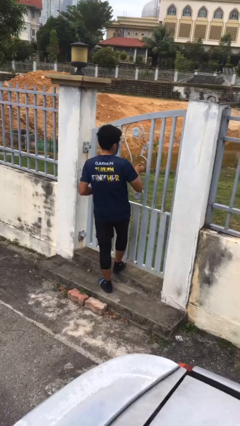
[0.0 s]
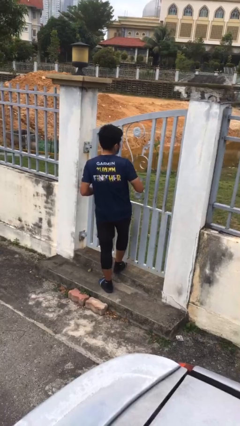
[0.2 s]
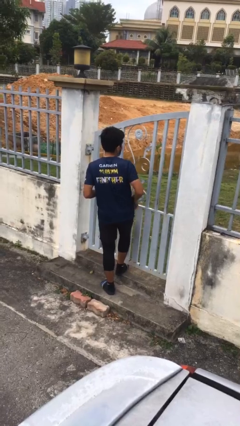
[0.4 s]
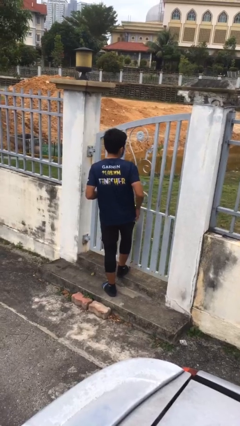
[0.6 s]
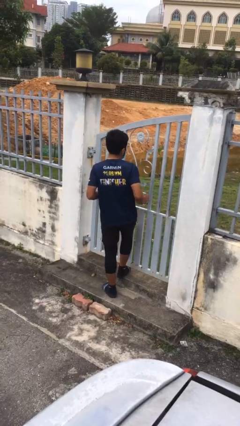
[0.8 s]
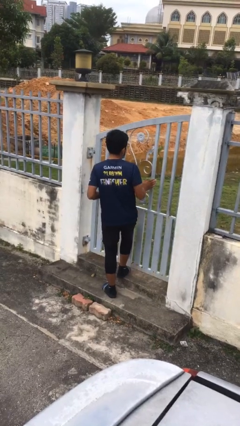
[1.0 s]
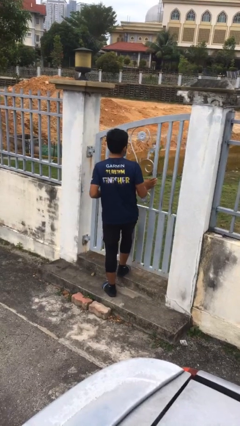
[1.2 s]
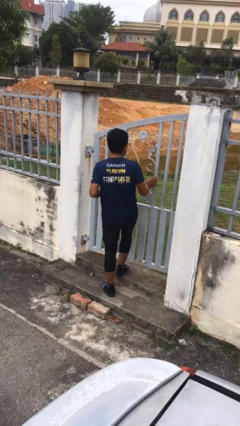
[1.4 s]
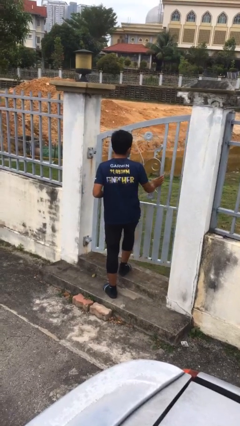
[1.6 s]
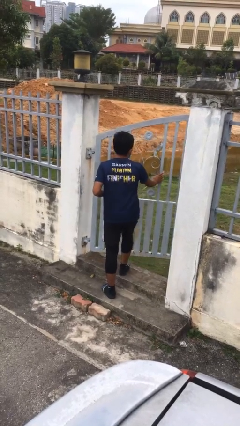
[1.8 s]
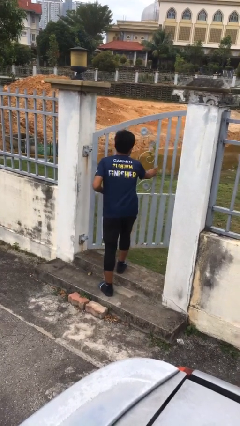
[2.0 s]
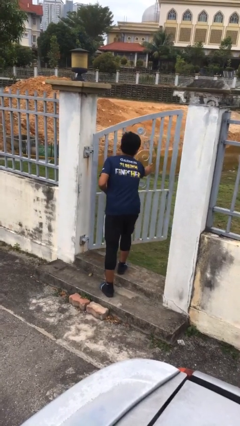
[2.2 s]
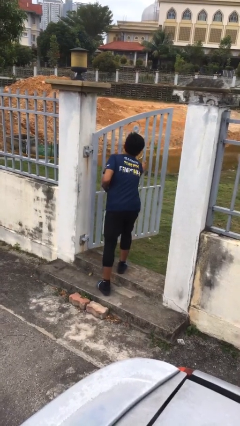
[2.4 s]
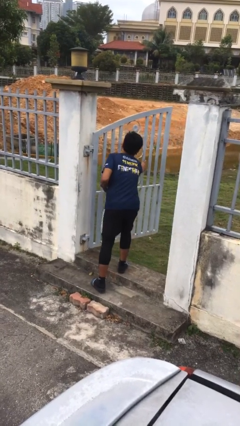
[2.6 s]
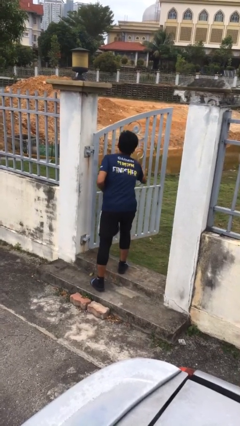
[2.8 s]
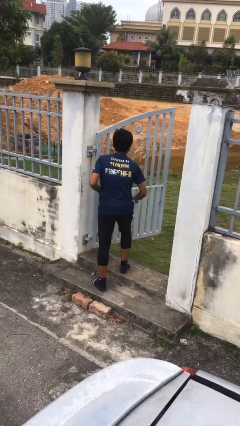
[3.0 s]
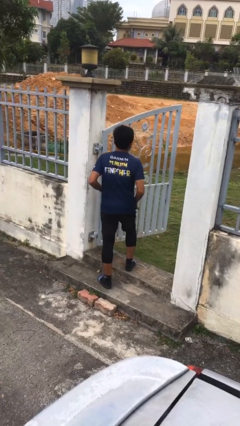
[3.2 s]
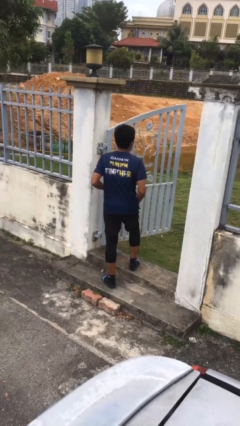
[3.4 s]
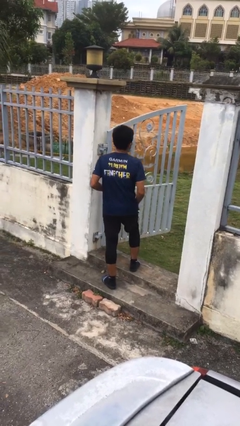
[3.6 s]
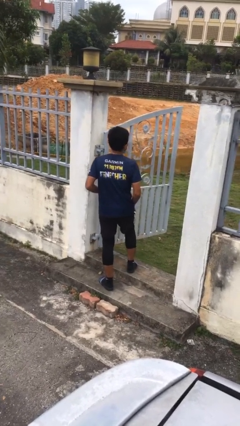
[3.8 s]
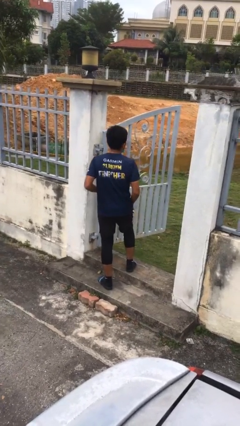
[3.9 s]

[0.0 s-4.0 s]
person opens facility door

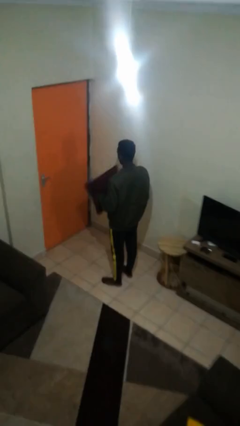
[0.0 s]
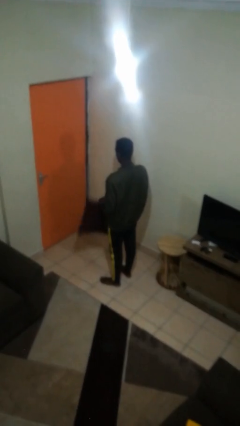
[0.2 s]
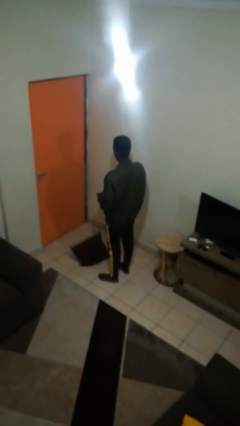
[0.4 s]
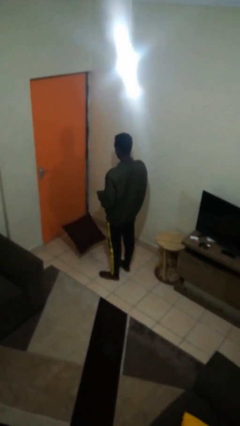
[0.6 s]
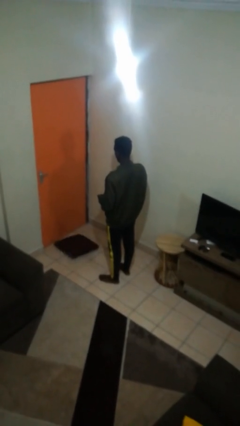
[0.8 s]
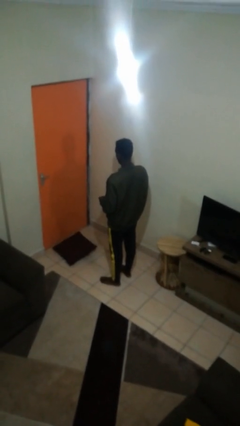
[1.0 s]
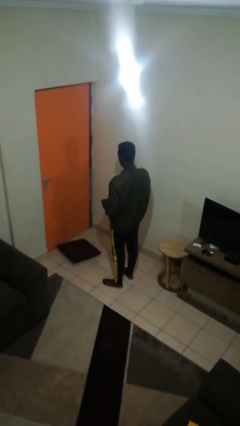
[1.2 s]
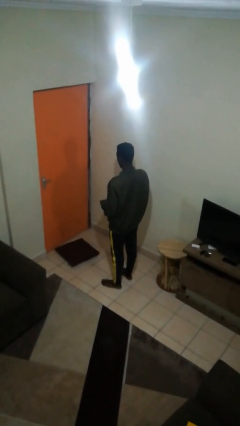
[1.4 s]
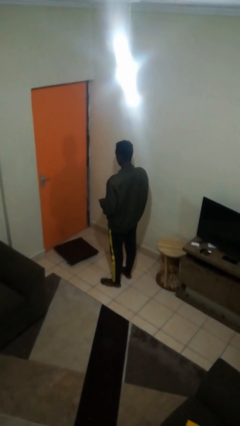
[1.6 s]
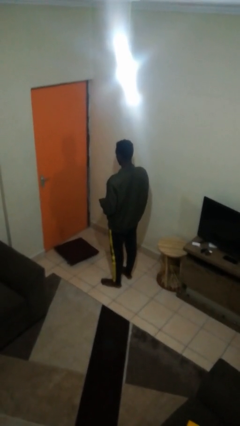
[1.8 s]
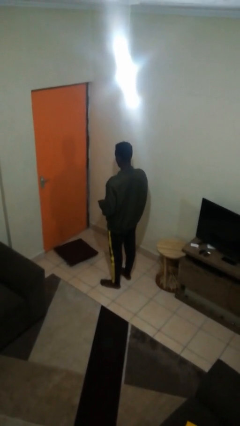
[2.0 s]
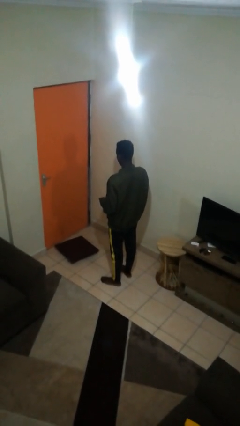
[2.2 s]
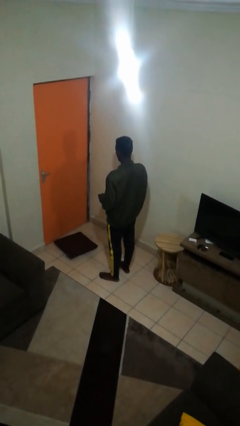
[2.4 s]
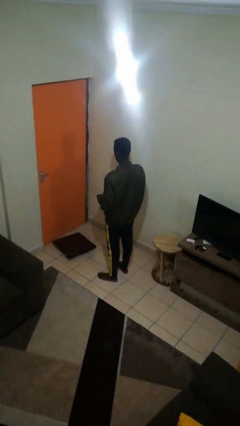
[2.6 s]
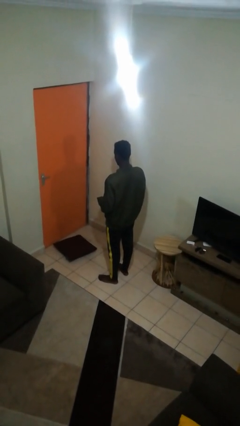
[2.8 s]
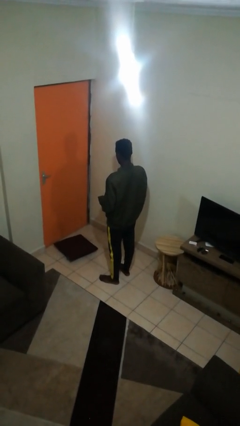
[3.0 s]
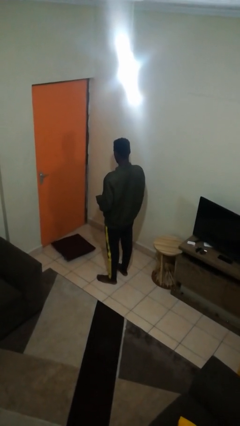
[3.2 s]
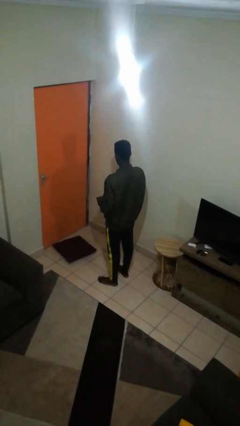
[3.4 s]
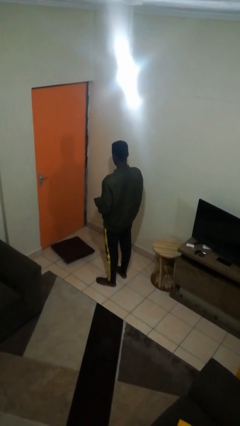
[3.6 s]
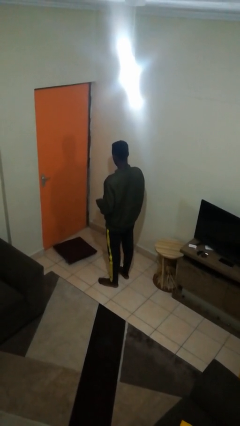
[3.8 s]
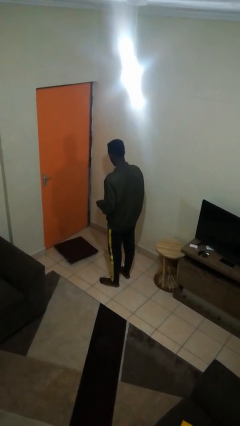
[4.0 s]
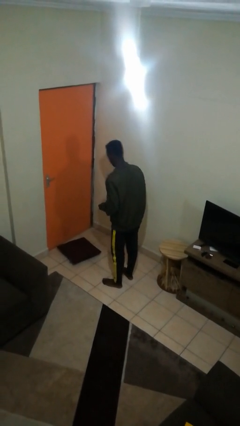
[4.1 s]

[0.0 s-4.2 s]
person drops object

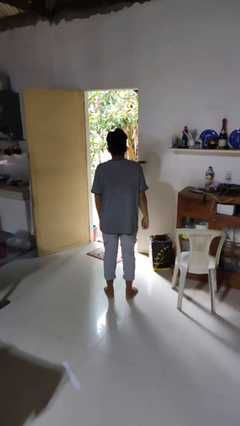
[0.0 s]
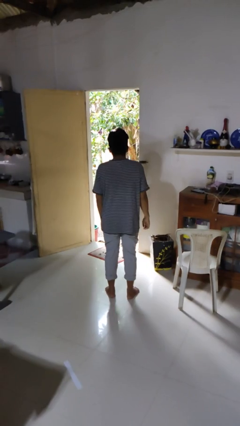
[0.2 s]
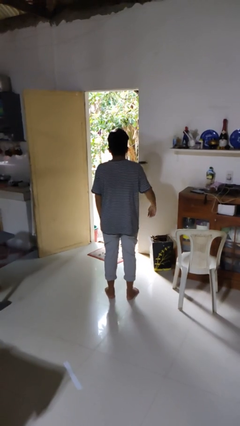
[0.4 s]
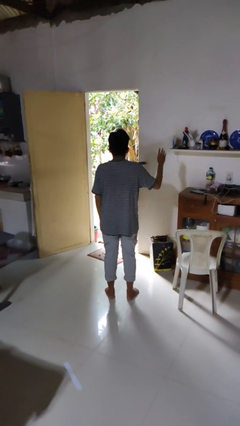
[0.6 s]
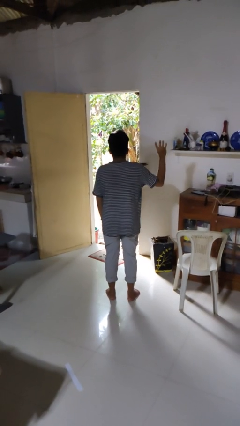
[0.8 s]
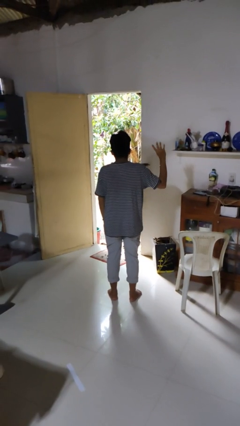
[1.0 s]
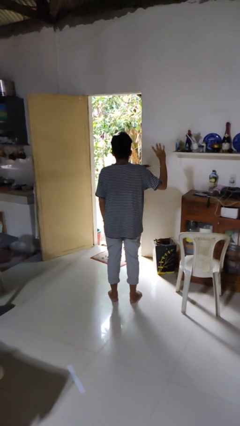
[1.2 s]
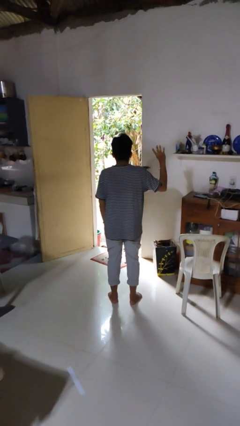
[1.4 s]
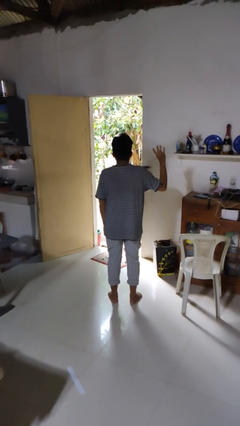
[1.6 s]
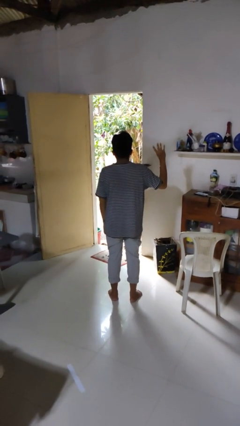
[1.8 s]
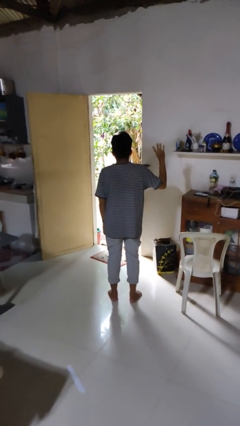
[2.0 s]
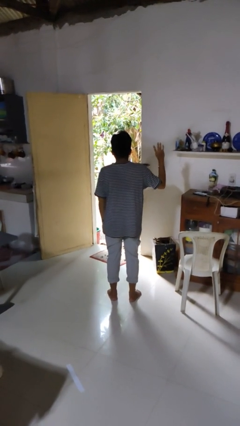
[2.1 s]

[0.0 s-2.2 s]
person gestures number four

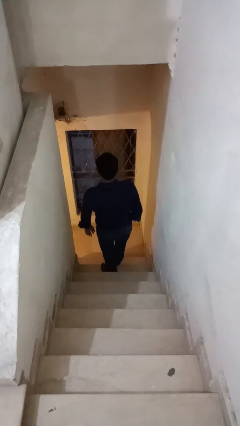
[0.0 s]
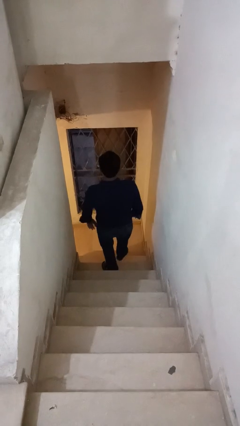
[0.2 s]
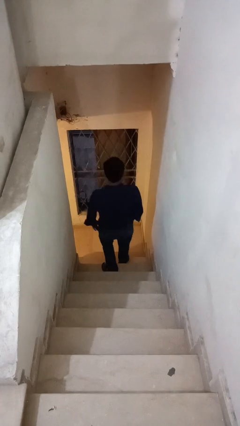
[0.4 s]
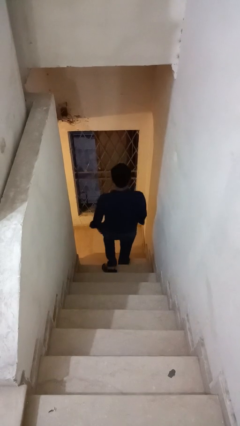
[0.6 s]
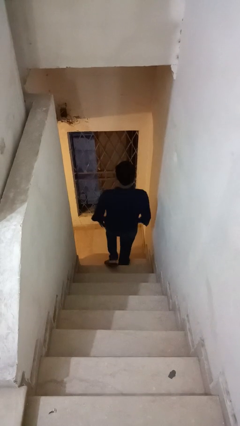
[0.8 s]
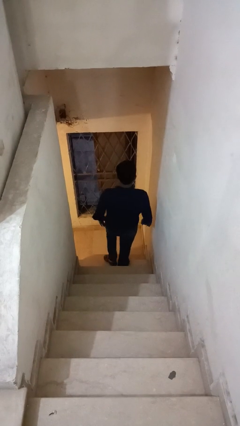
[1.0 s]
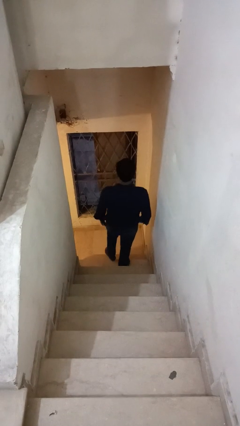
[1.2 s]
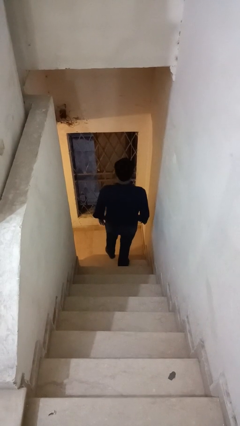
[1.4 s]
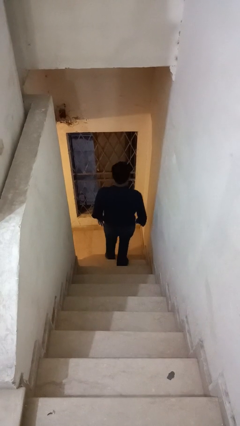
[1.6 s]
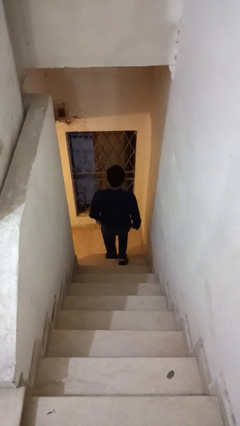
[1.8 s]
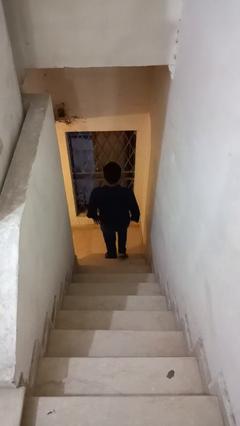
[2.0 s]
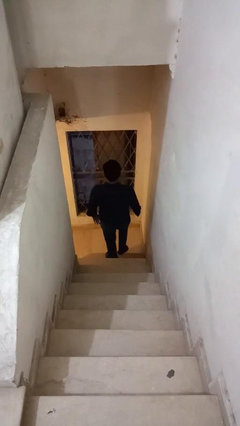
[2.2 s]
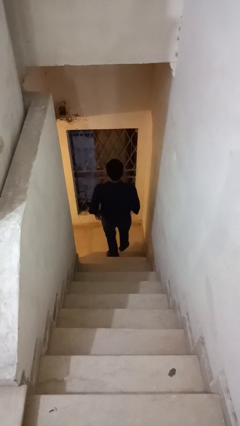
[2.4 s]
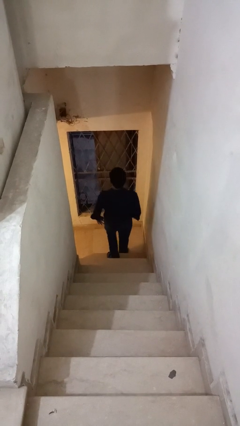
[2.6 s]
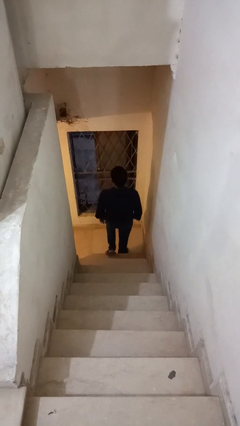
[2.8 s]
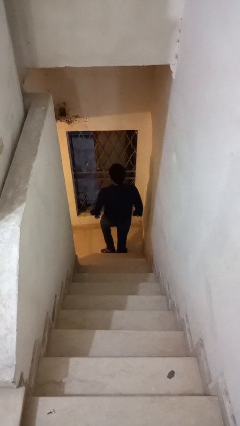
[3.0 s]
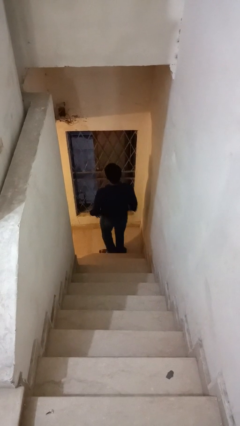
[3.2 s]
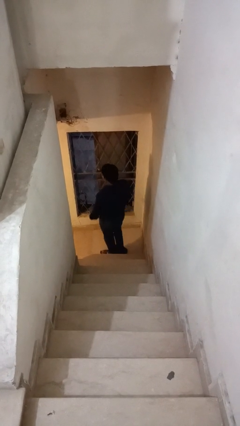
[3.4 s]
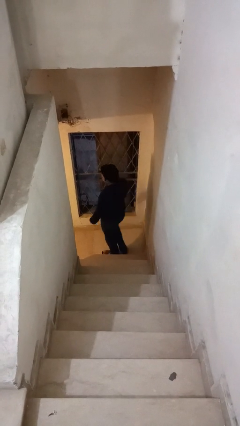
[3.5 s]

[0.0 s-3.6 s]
person climbs down stairs

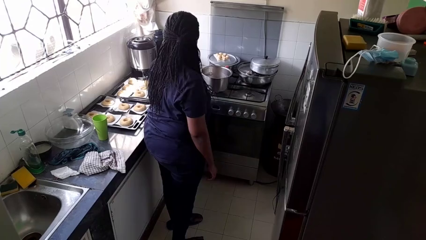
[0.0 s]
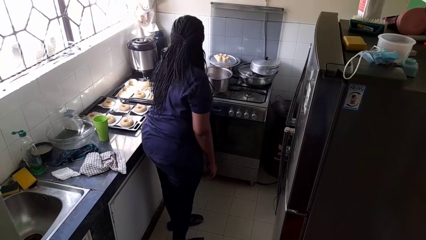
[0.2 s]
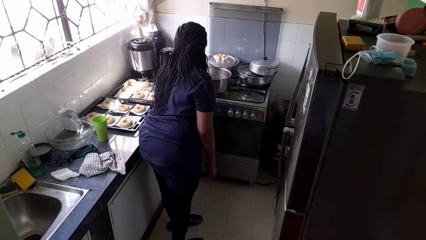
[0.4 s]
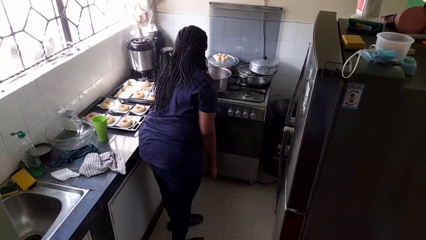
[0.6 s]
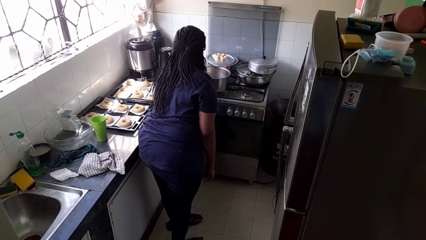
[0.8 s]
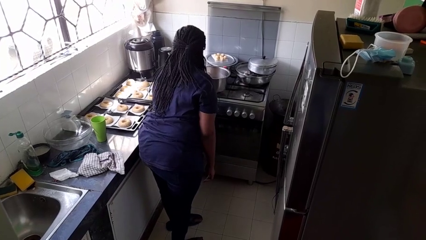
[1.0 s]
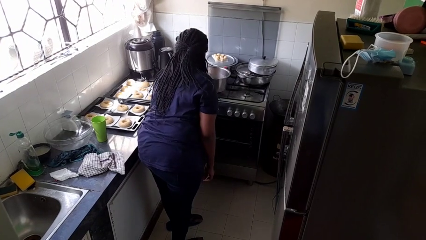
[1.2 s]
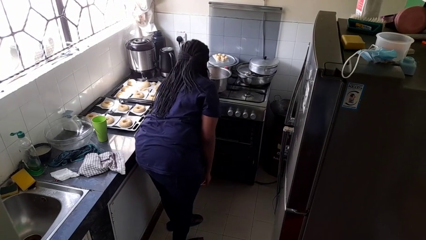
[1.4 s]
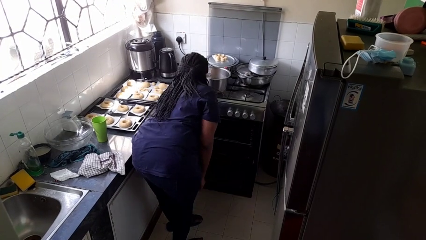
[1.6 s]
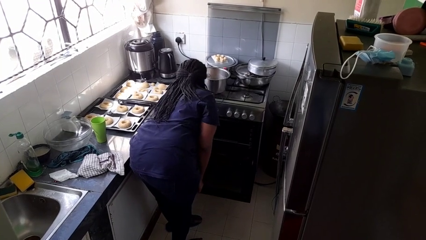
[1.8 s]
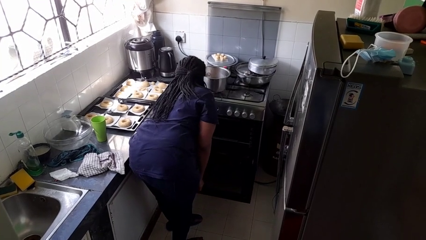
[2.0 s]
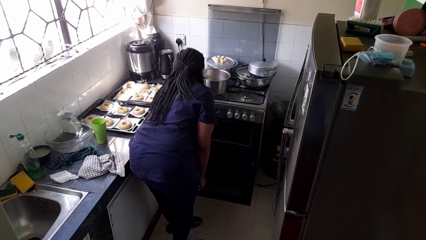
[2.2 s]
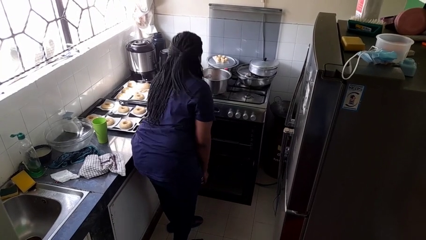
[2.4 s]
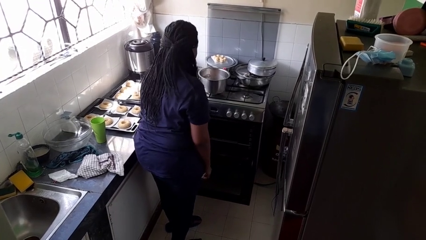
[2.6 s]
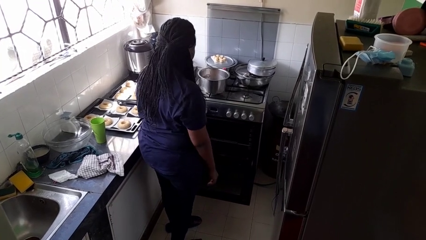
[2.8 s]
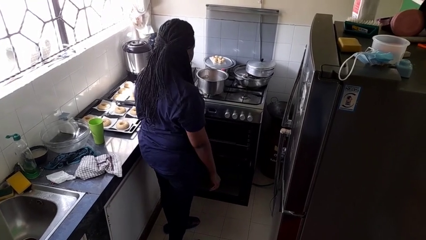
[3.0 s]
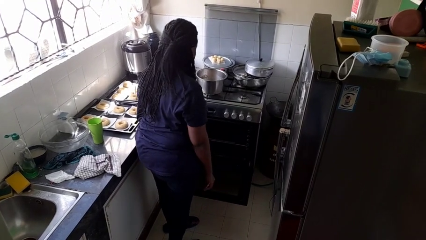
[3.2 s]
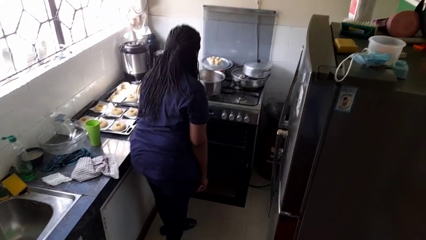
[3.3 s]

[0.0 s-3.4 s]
person opens oven door

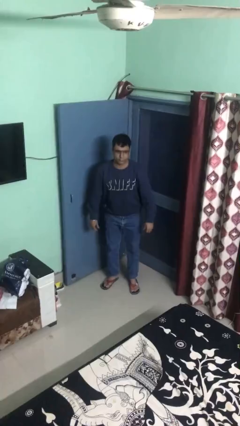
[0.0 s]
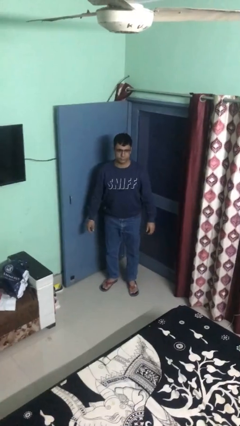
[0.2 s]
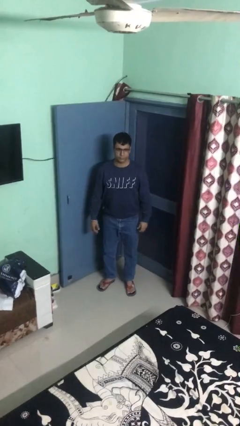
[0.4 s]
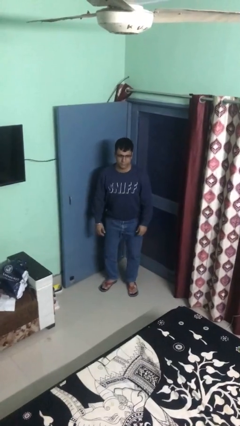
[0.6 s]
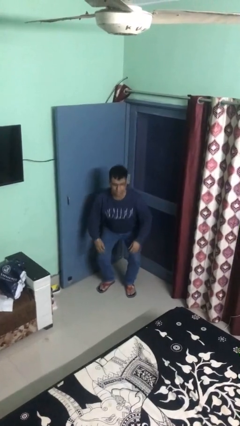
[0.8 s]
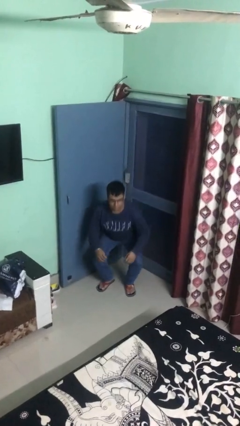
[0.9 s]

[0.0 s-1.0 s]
person sits down
